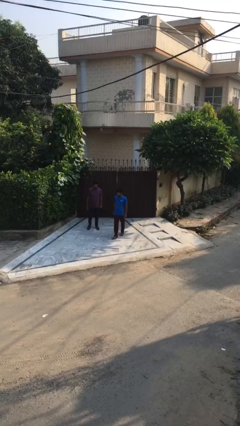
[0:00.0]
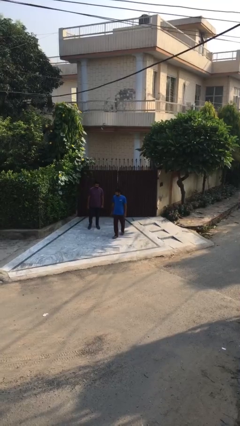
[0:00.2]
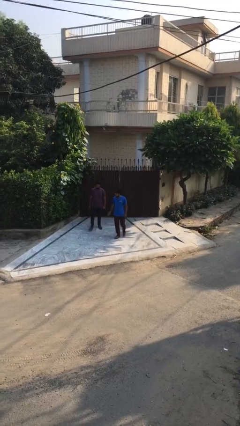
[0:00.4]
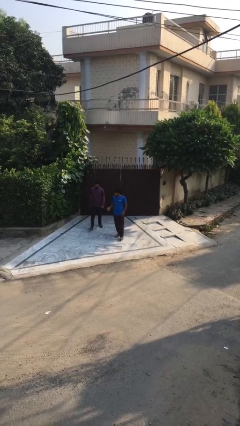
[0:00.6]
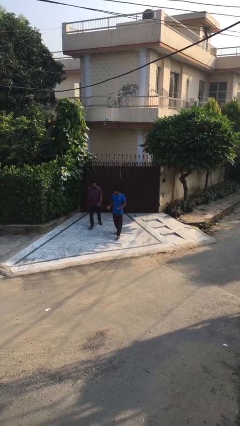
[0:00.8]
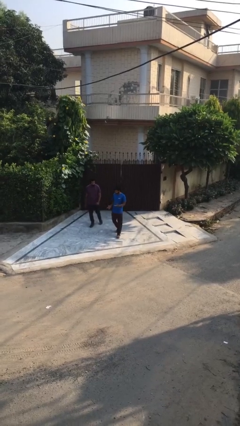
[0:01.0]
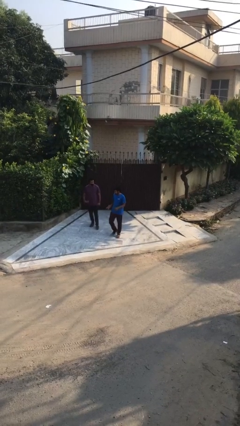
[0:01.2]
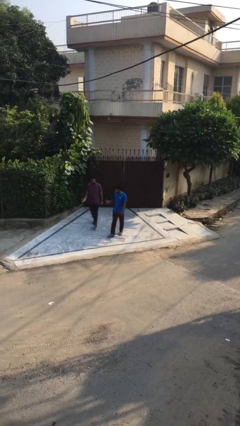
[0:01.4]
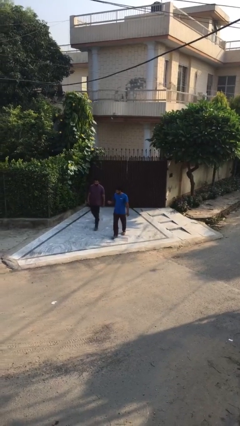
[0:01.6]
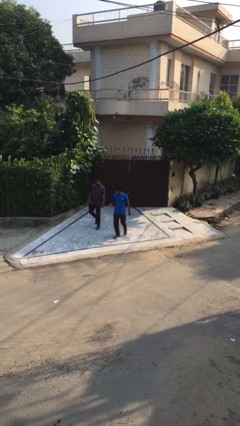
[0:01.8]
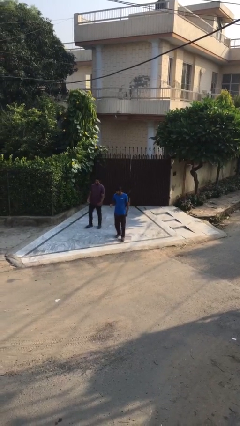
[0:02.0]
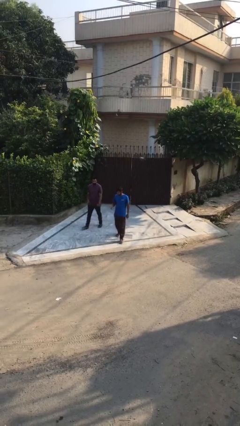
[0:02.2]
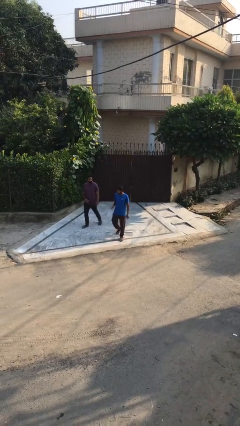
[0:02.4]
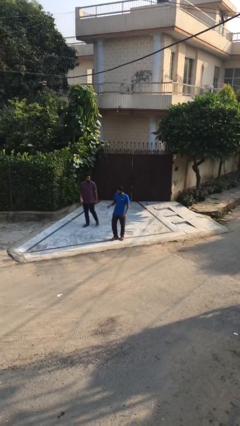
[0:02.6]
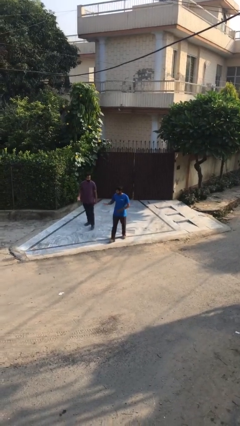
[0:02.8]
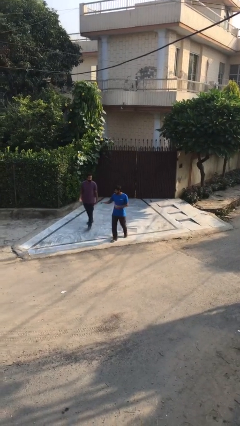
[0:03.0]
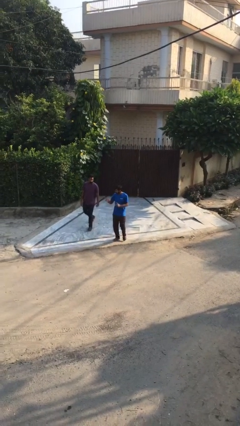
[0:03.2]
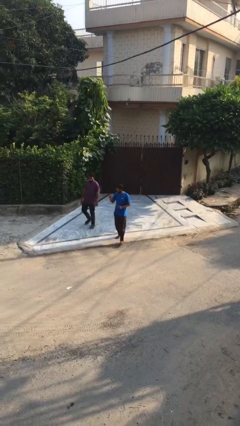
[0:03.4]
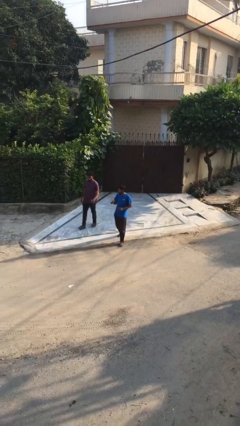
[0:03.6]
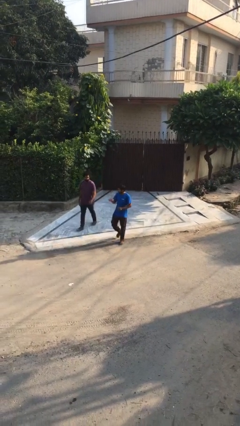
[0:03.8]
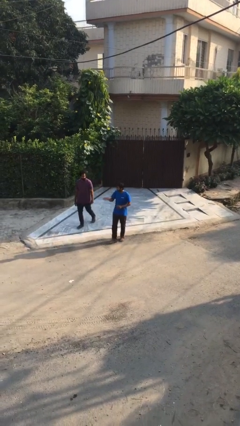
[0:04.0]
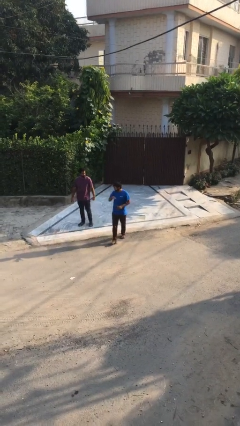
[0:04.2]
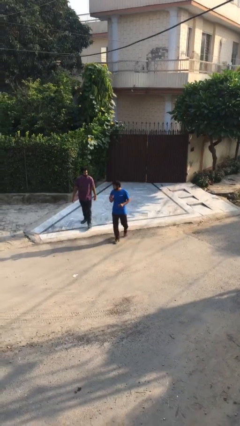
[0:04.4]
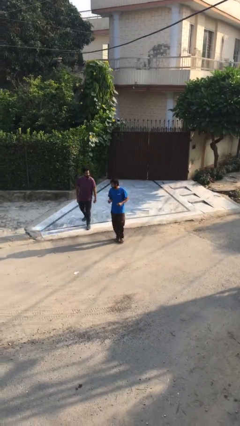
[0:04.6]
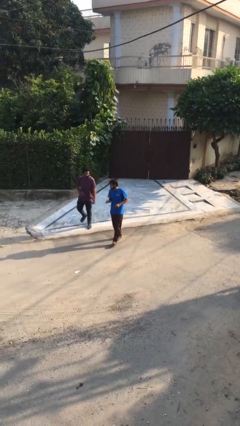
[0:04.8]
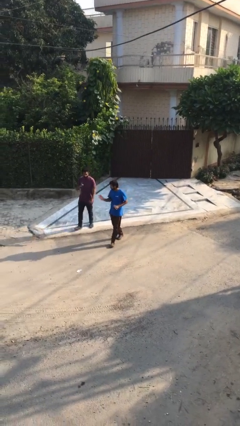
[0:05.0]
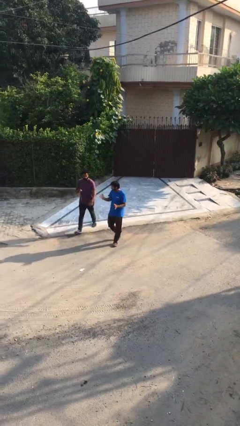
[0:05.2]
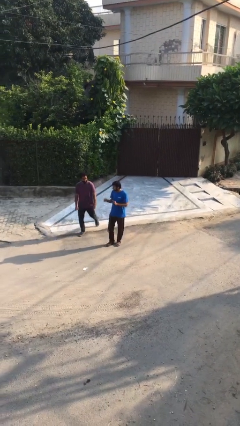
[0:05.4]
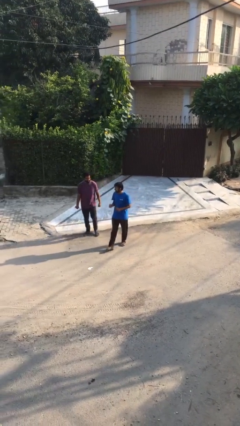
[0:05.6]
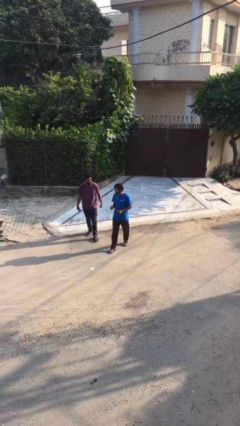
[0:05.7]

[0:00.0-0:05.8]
person talks to person

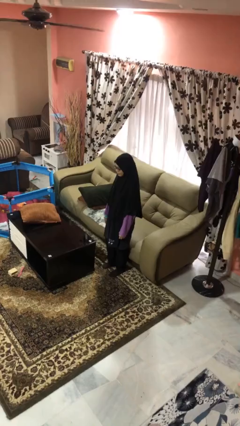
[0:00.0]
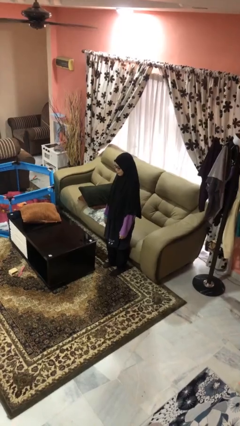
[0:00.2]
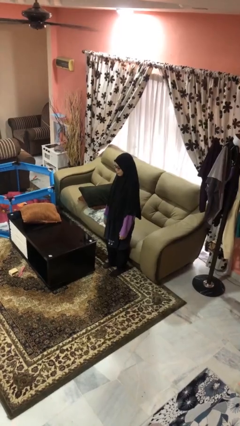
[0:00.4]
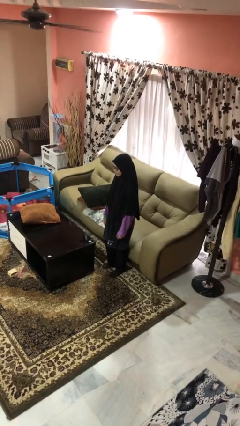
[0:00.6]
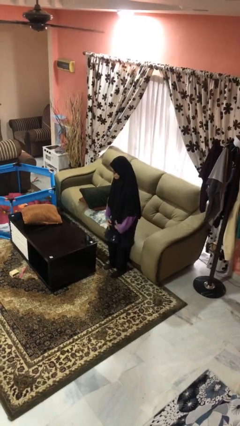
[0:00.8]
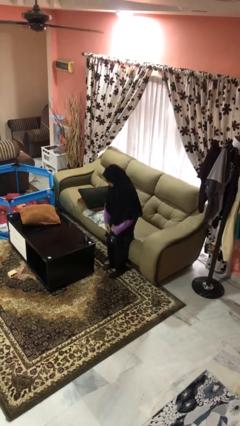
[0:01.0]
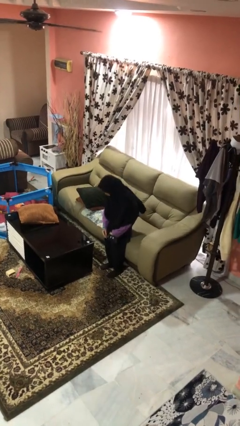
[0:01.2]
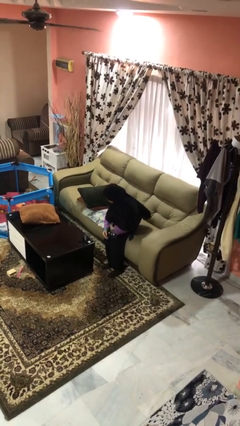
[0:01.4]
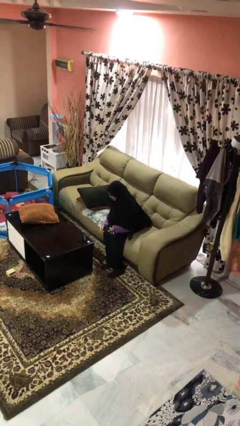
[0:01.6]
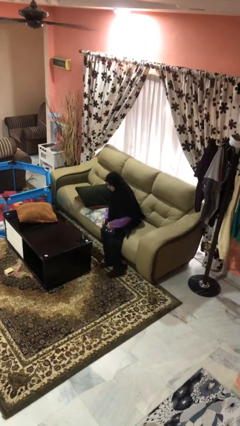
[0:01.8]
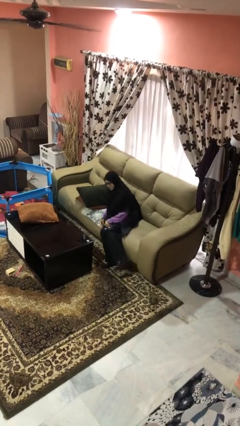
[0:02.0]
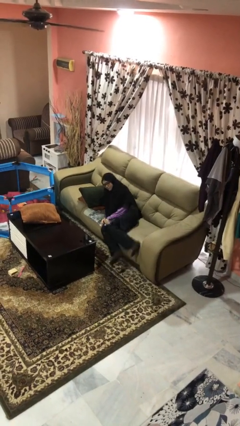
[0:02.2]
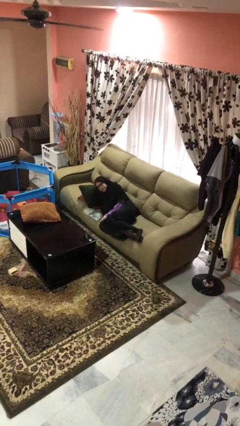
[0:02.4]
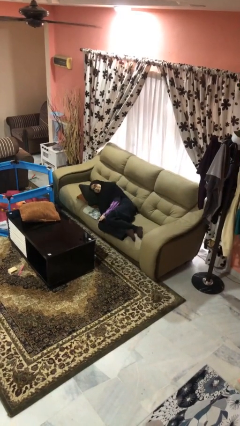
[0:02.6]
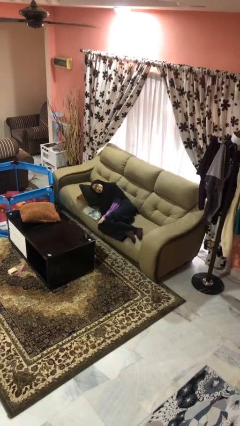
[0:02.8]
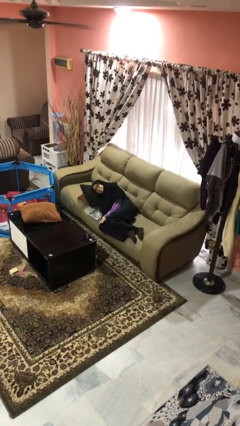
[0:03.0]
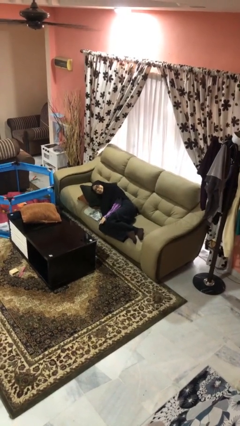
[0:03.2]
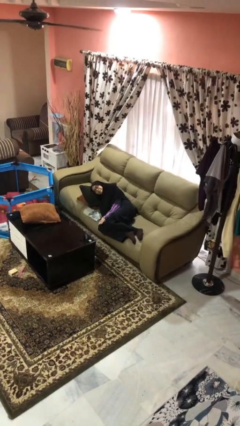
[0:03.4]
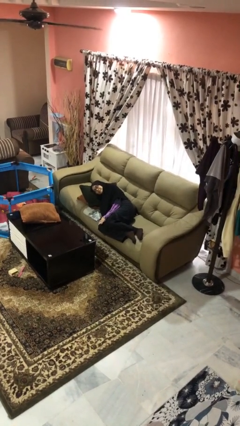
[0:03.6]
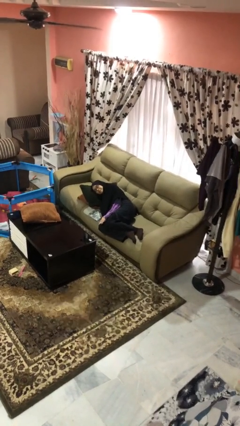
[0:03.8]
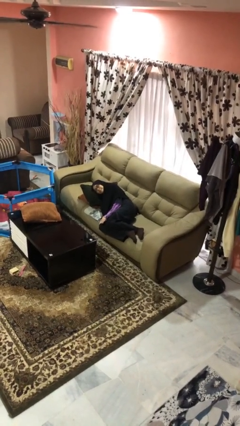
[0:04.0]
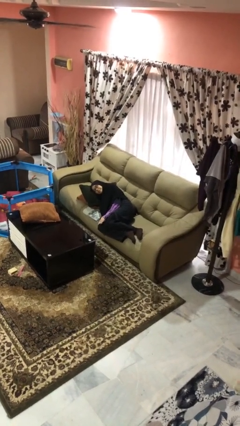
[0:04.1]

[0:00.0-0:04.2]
person lies down on couch

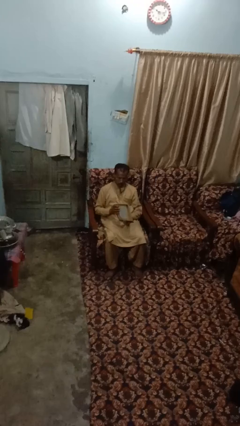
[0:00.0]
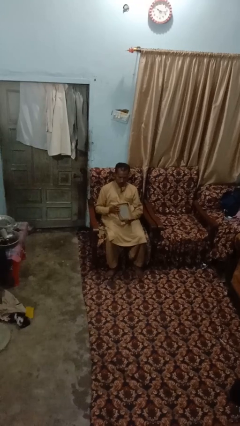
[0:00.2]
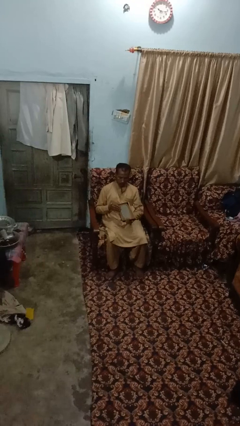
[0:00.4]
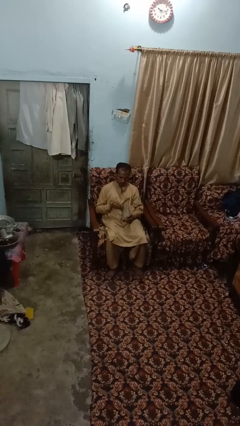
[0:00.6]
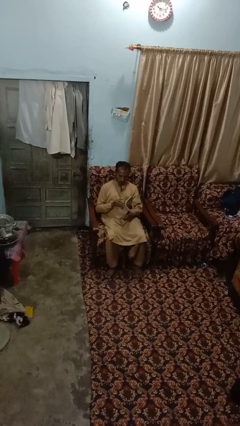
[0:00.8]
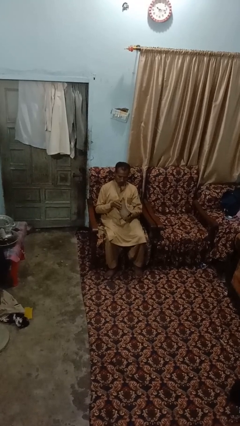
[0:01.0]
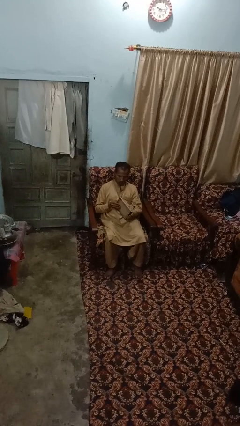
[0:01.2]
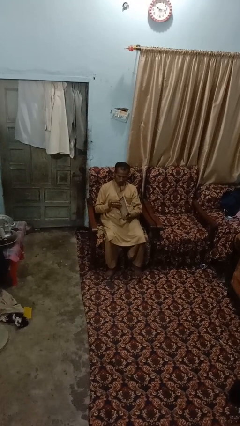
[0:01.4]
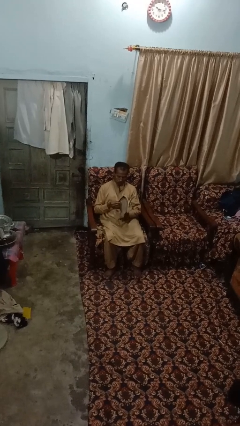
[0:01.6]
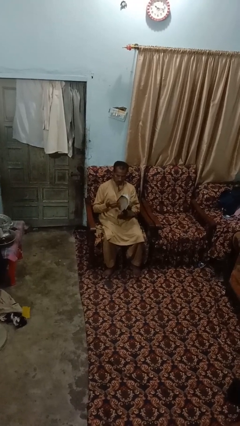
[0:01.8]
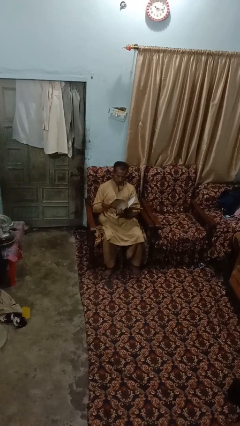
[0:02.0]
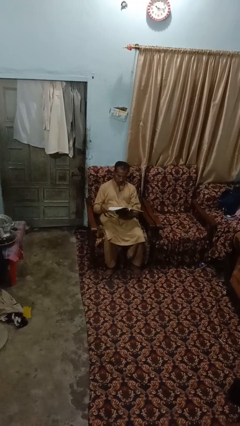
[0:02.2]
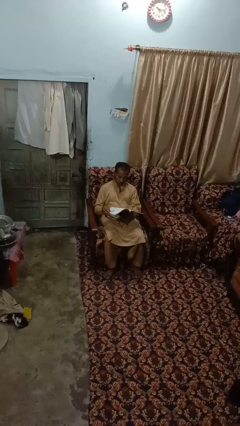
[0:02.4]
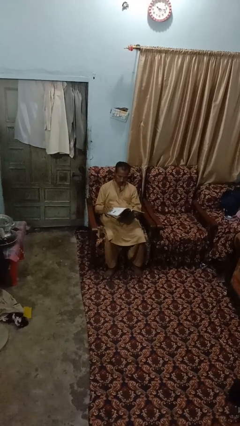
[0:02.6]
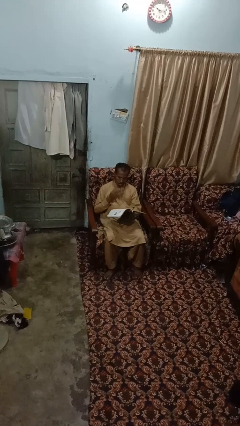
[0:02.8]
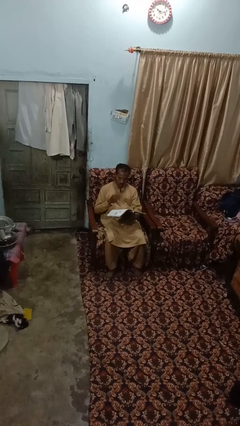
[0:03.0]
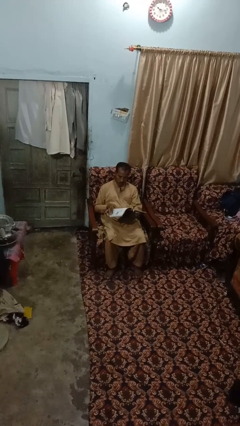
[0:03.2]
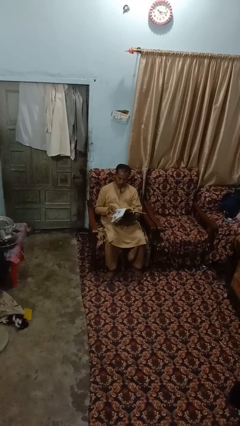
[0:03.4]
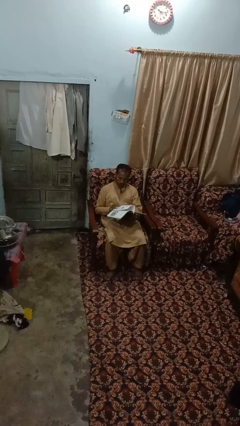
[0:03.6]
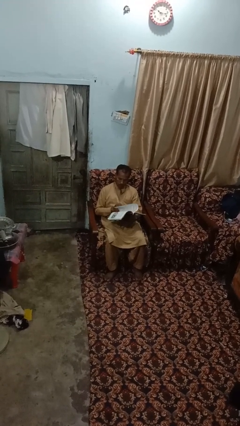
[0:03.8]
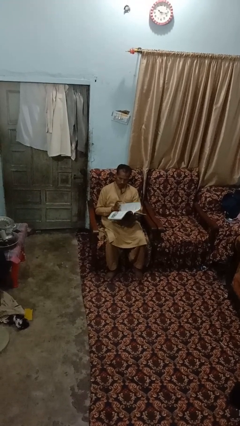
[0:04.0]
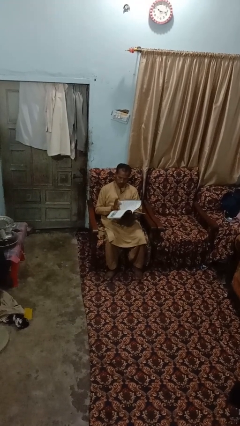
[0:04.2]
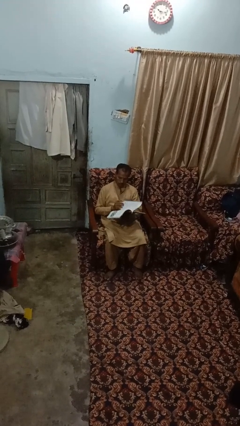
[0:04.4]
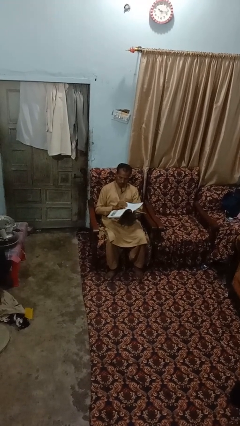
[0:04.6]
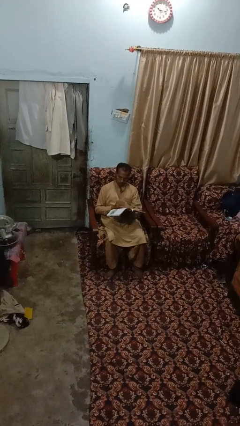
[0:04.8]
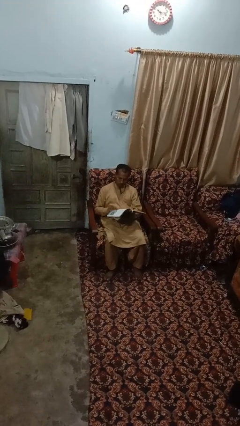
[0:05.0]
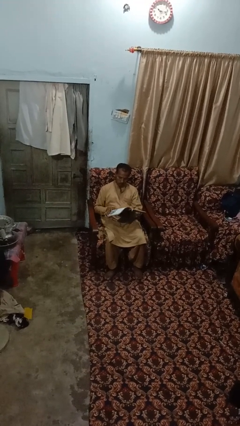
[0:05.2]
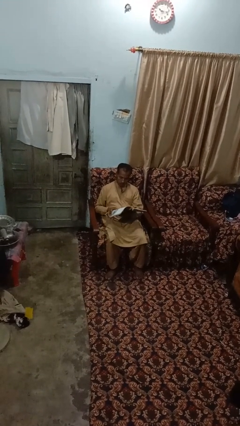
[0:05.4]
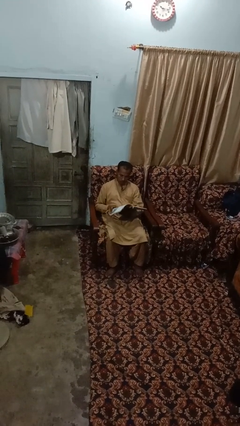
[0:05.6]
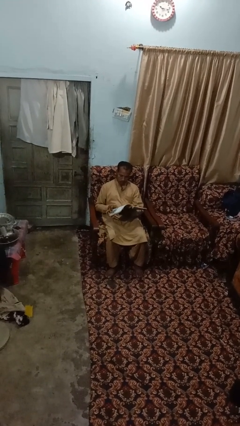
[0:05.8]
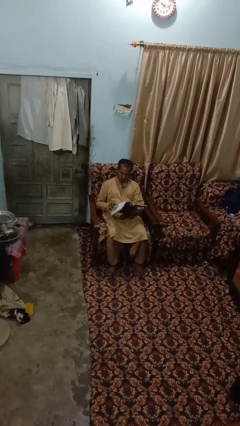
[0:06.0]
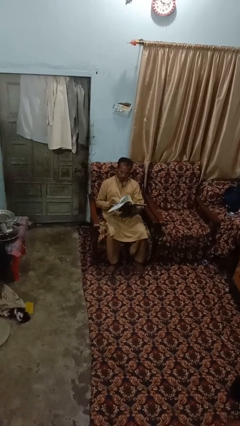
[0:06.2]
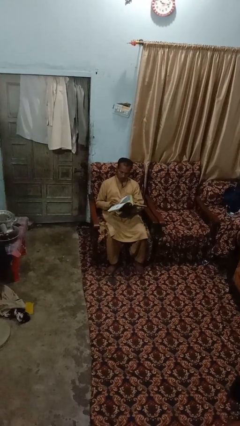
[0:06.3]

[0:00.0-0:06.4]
person reads book

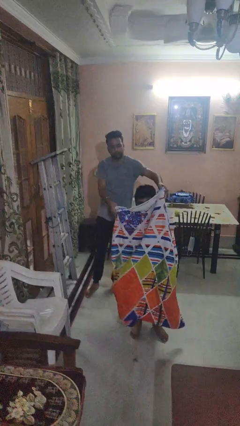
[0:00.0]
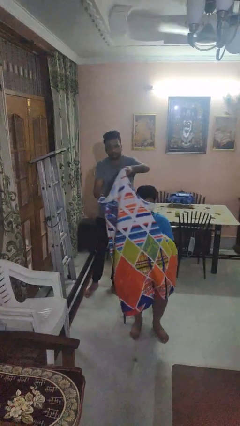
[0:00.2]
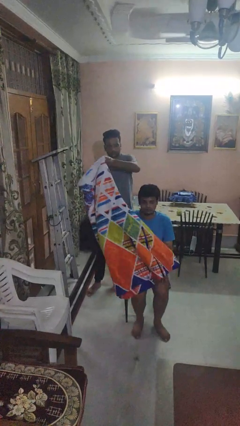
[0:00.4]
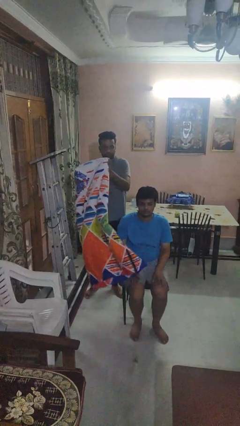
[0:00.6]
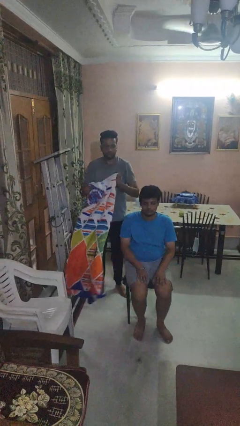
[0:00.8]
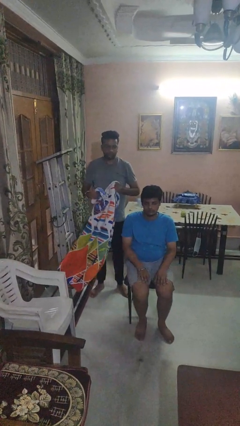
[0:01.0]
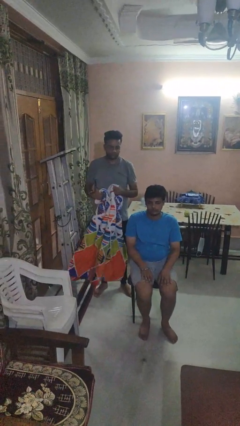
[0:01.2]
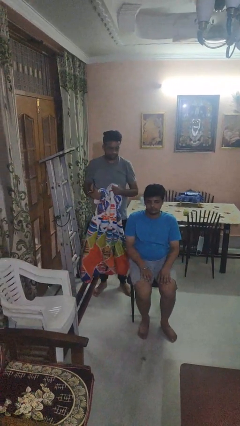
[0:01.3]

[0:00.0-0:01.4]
person uncovers friend with blanket
